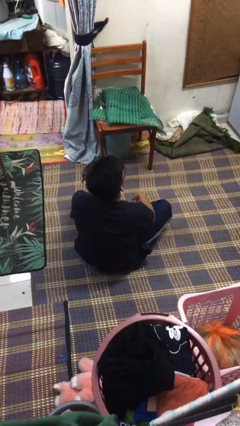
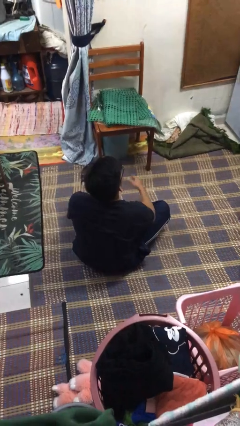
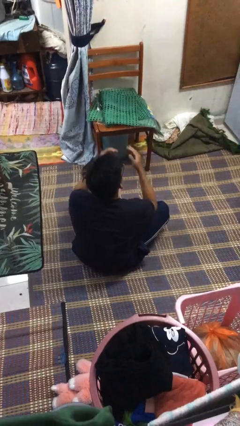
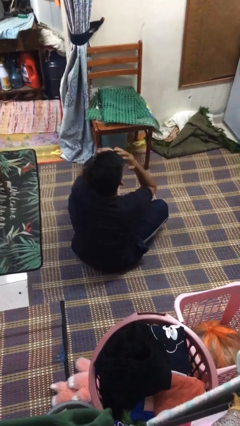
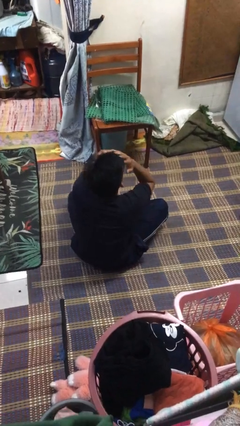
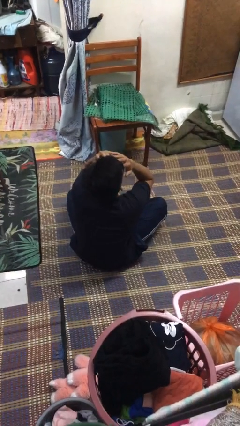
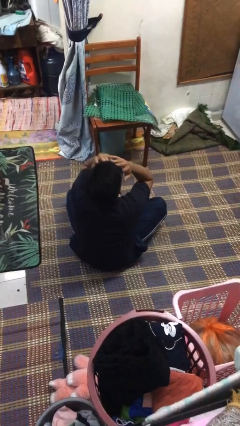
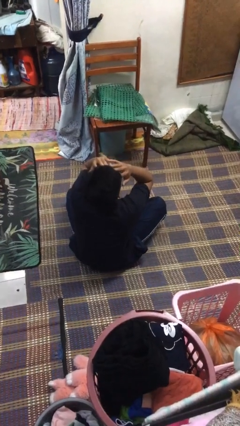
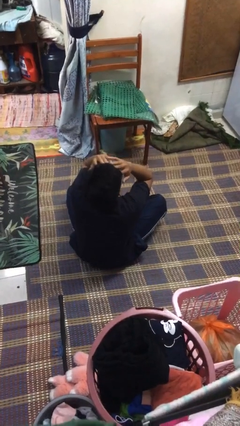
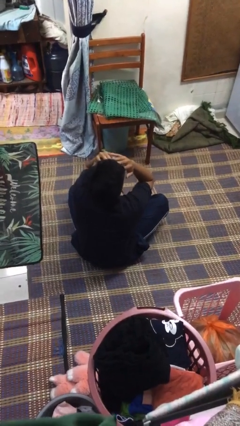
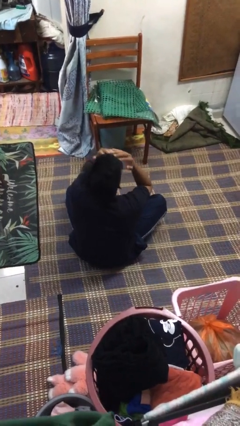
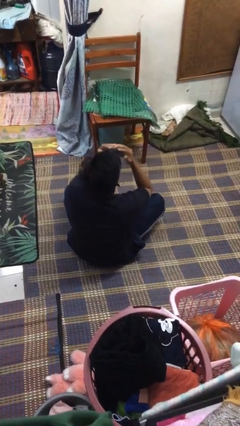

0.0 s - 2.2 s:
person covers face with hands

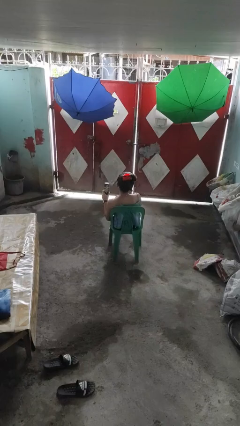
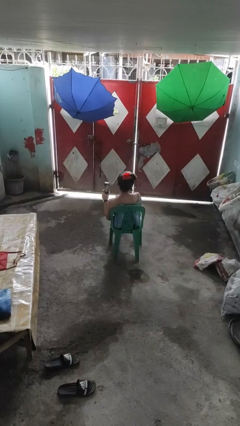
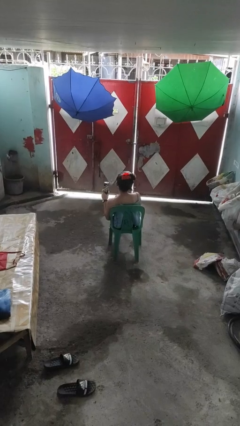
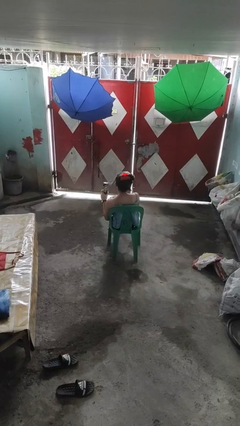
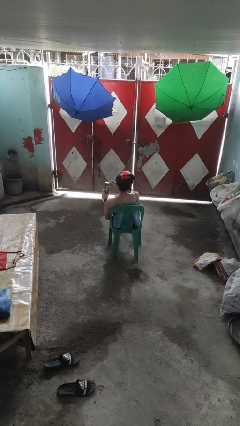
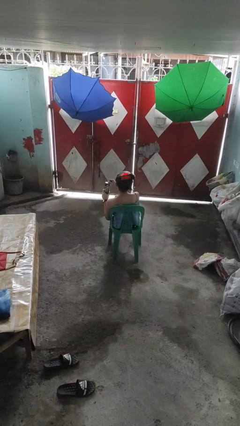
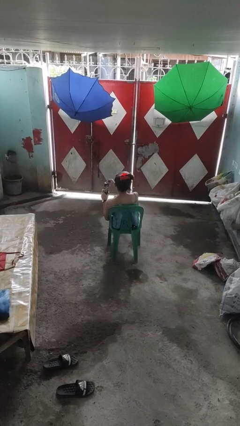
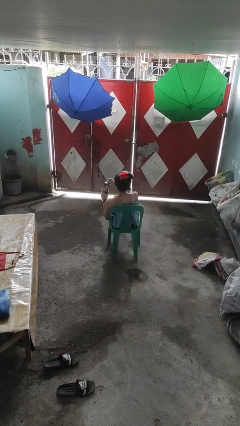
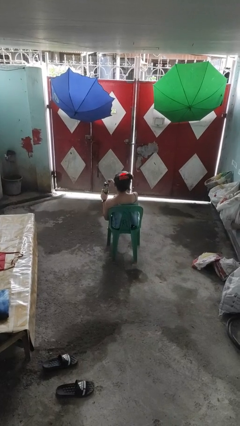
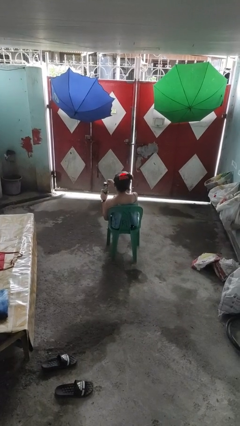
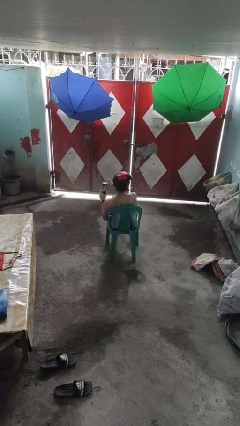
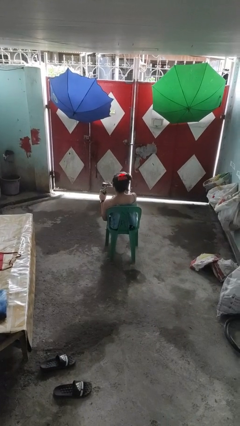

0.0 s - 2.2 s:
person opens beverage can

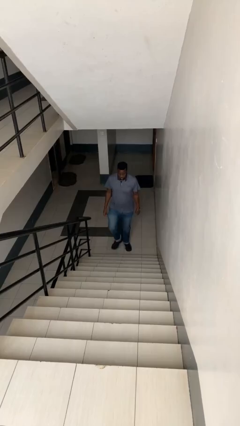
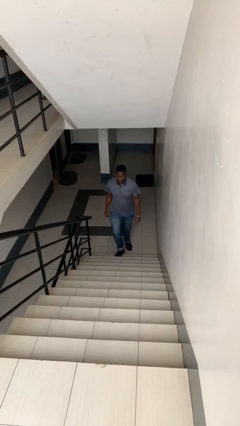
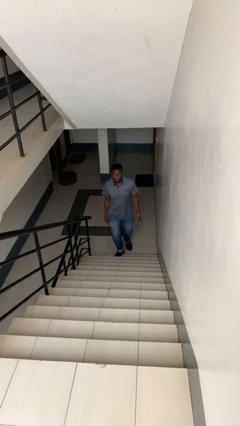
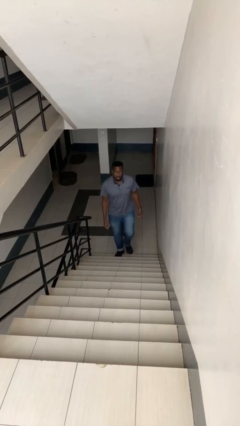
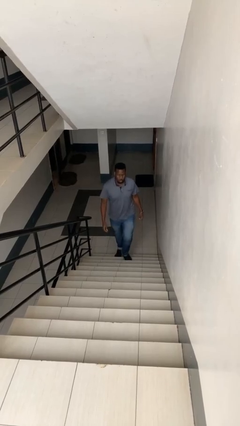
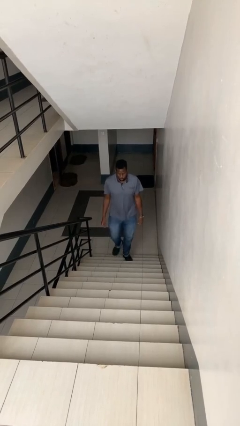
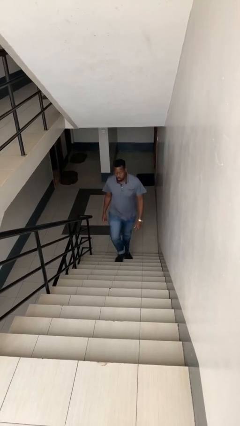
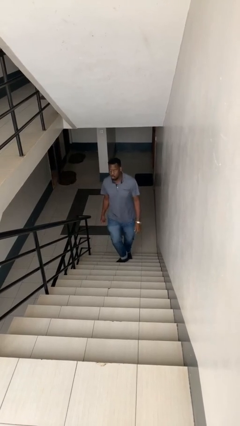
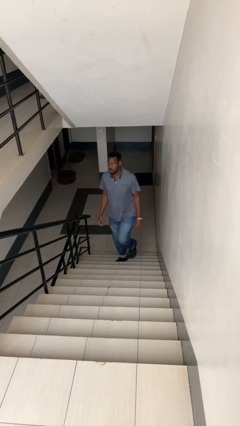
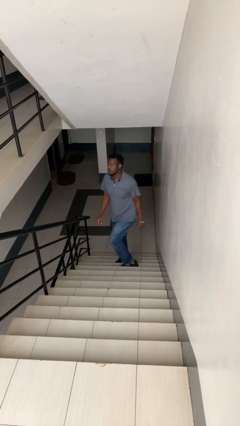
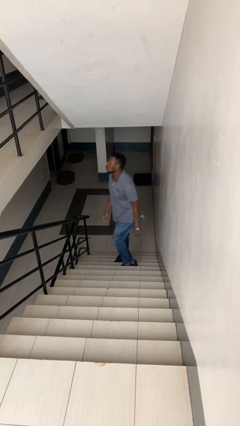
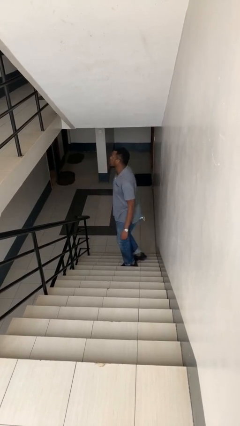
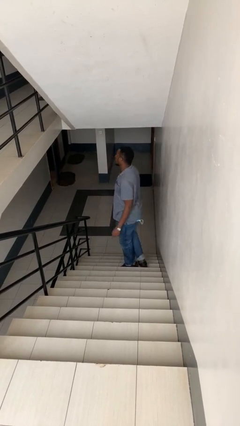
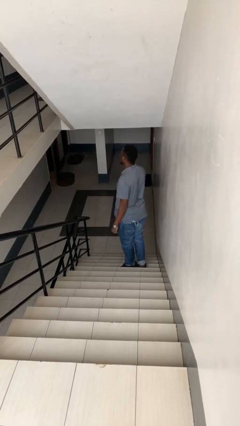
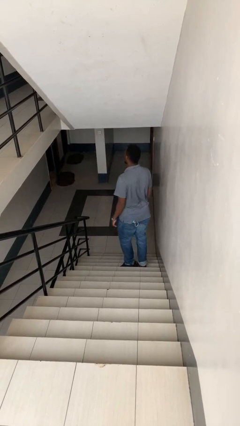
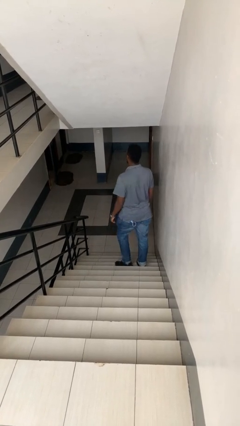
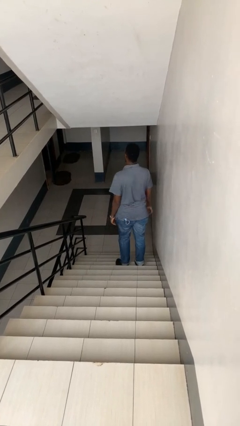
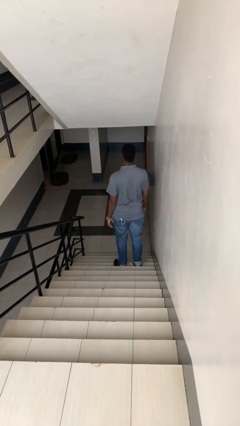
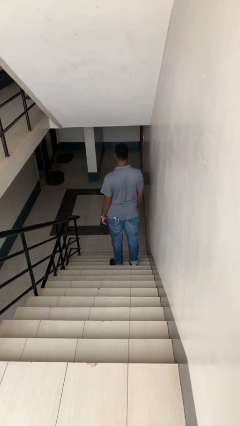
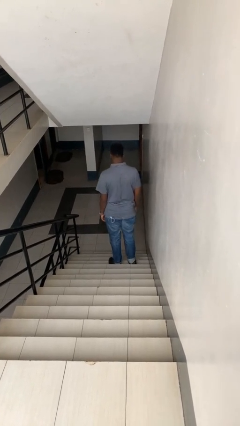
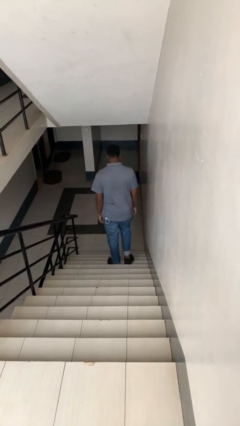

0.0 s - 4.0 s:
person climbs up stairs

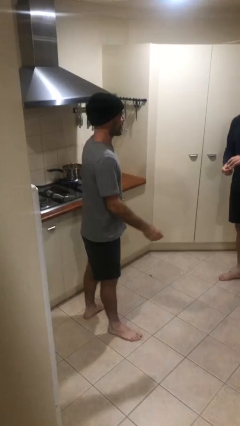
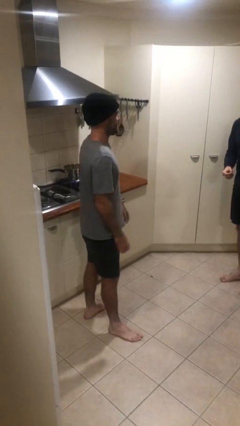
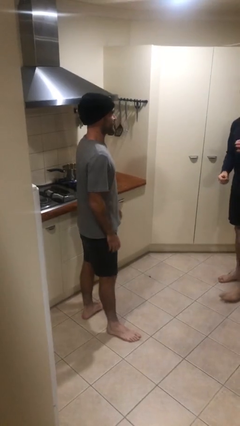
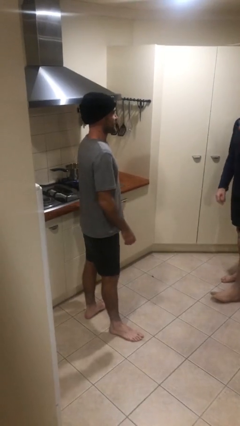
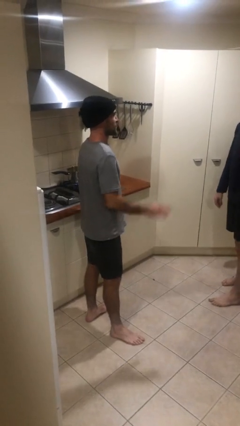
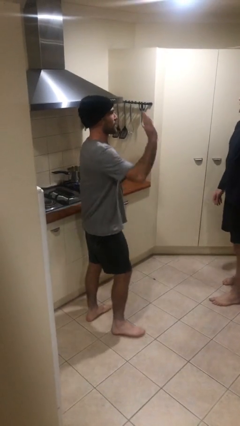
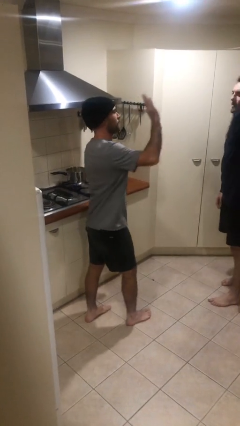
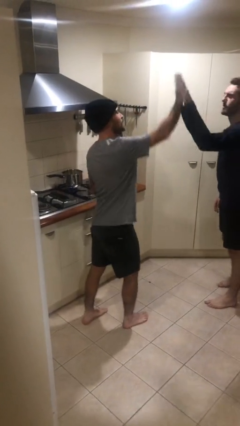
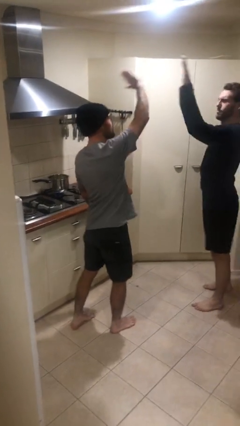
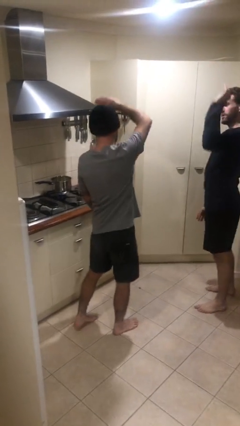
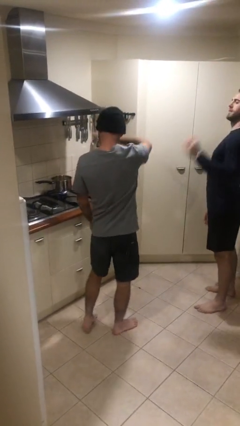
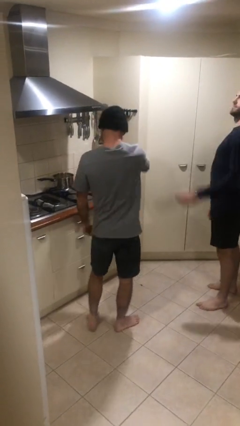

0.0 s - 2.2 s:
person highfives hand

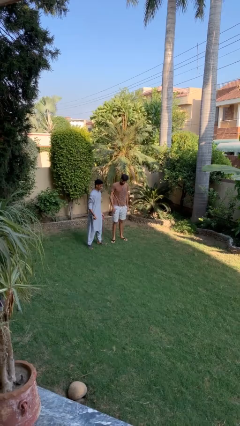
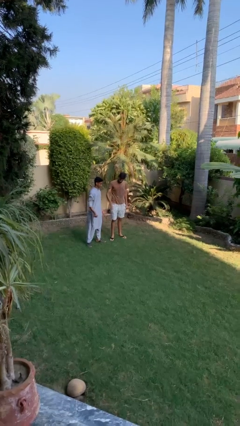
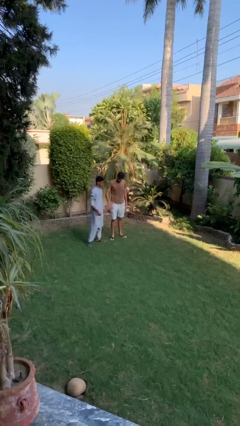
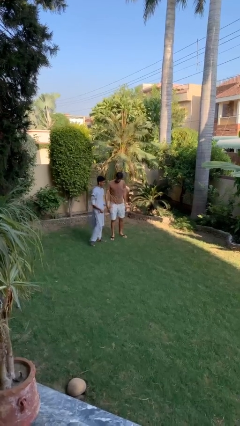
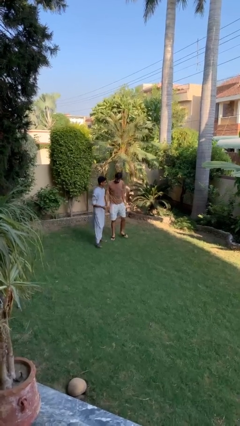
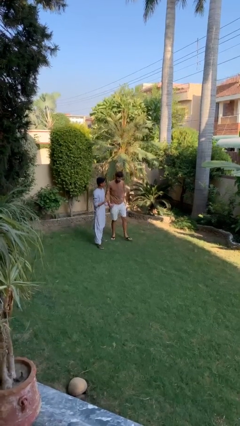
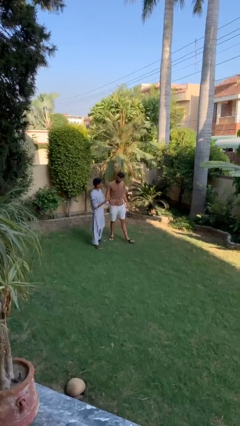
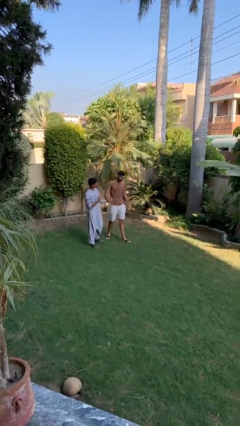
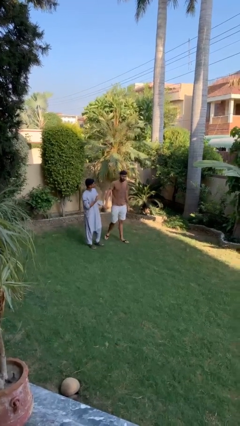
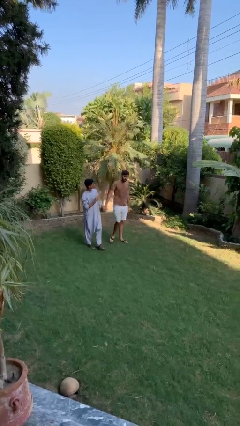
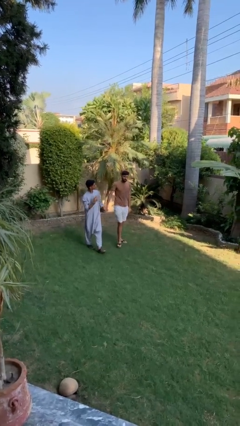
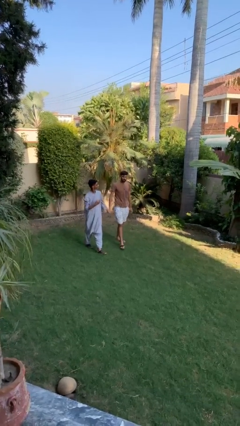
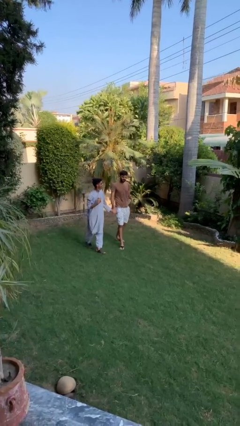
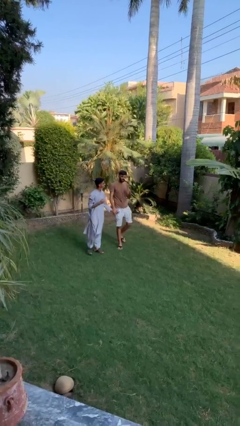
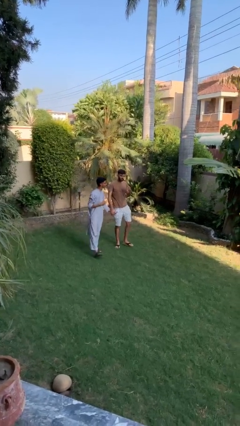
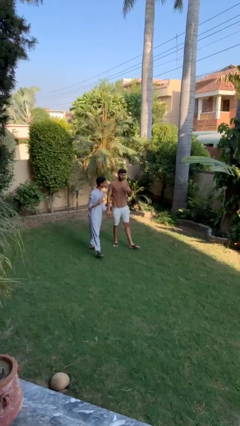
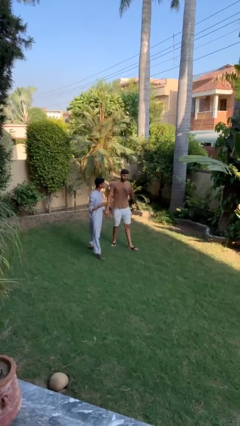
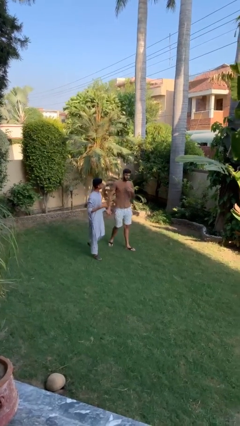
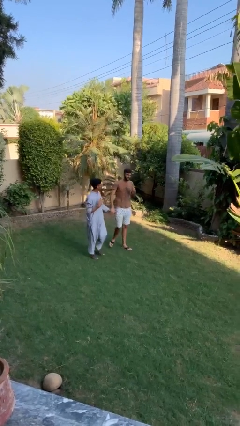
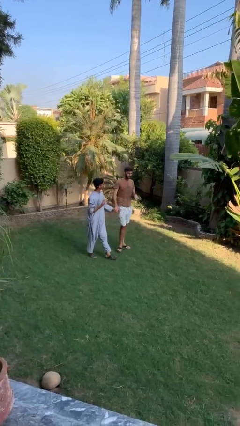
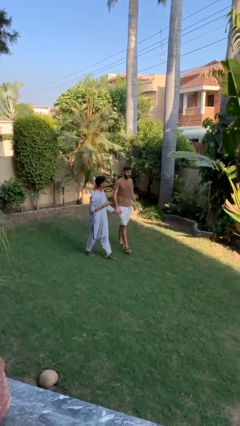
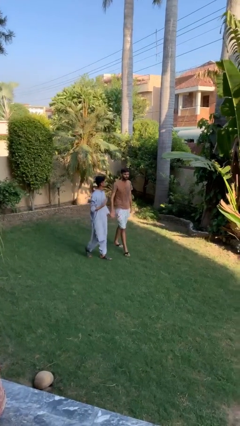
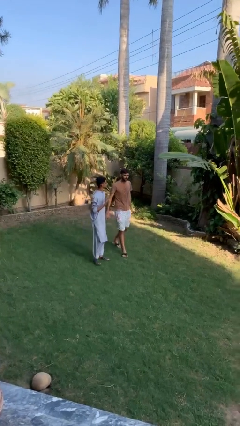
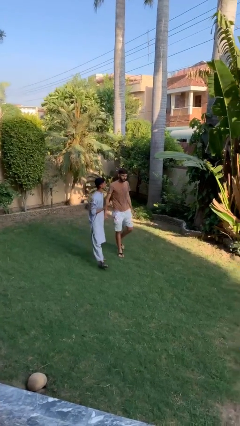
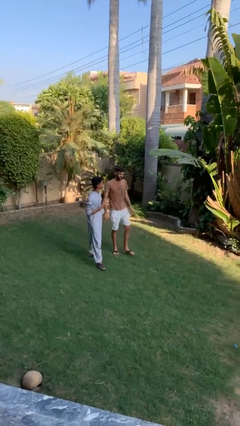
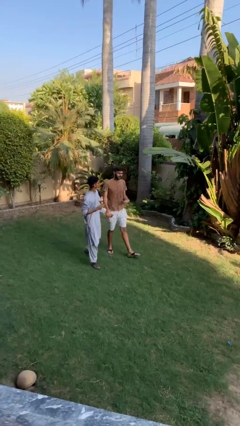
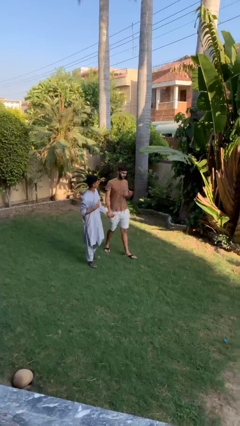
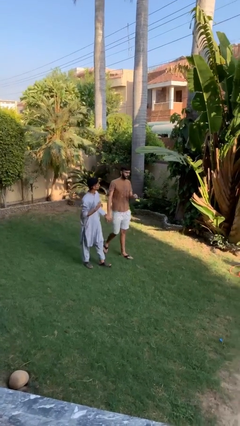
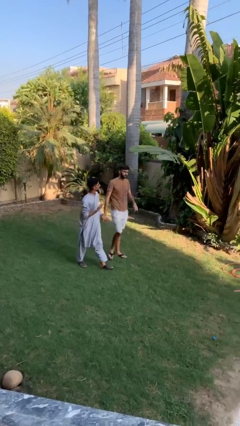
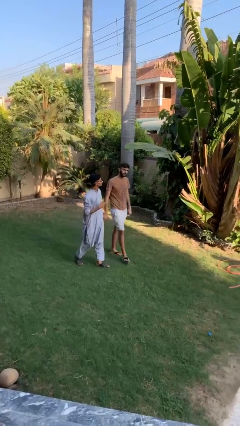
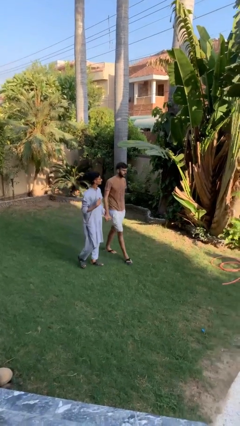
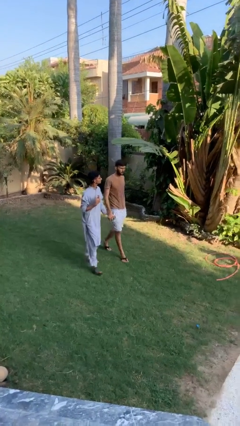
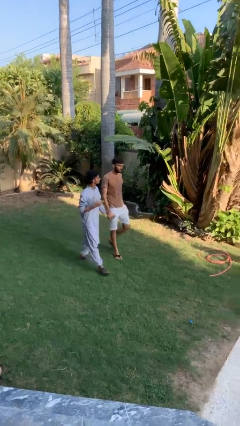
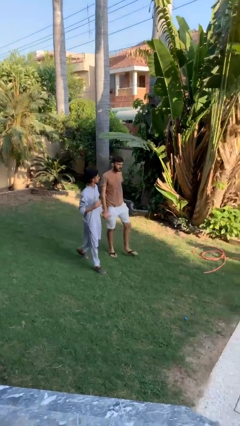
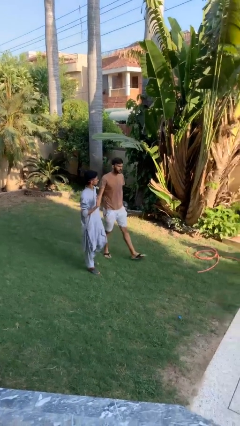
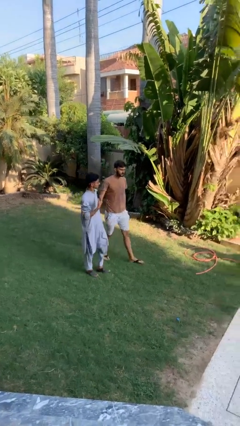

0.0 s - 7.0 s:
person holds hand

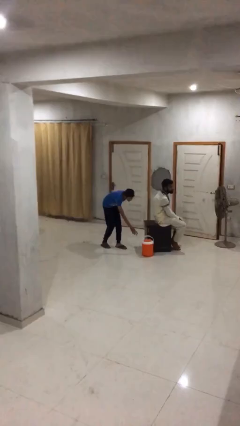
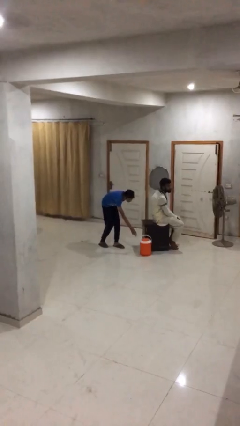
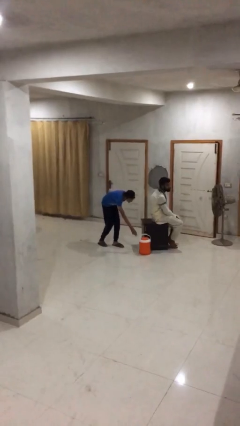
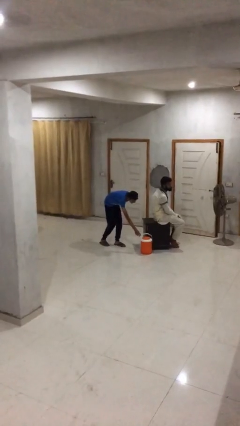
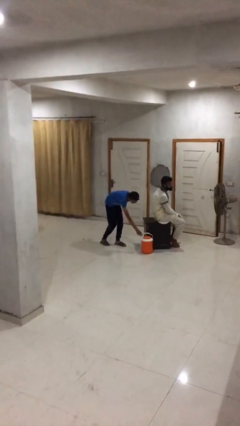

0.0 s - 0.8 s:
person steals object from person
